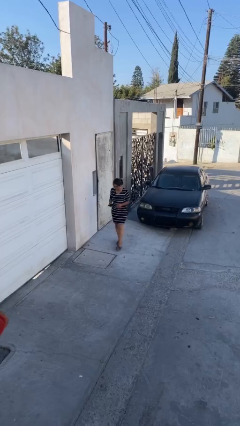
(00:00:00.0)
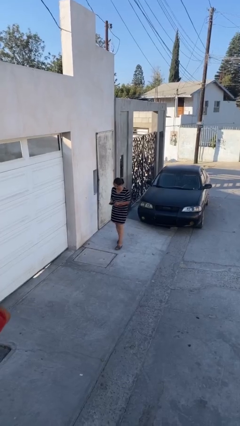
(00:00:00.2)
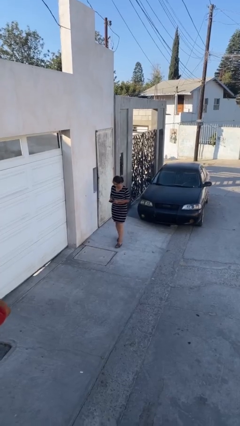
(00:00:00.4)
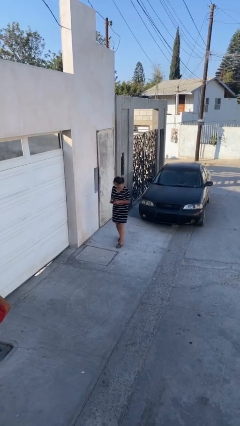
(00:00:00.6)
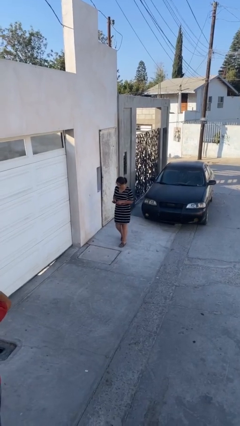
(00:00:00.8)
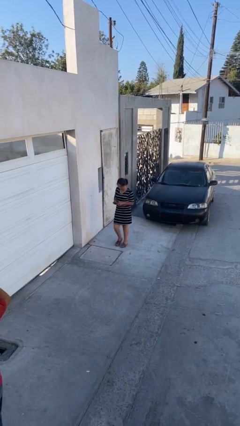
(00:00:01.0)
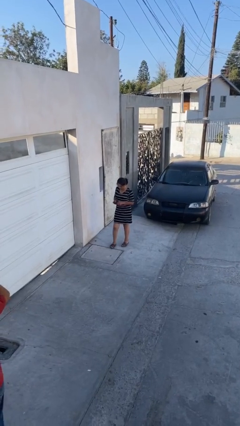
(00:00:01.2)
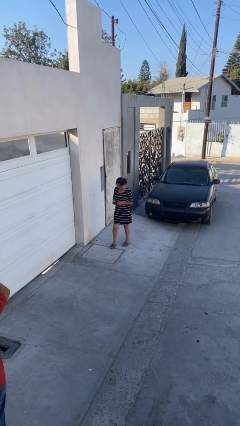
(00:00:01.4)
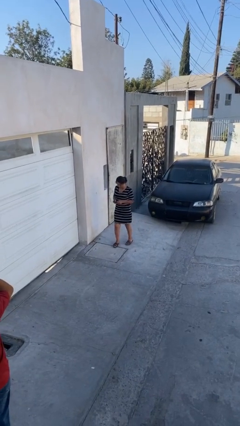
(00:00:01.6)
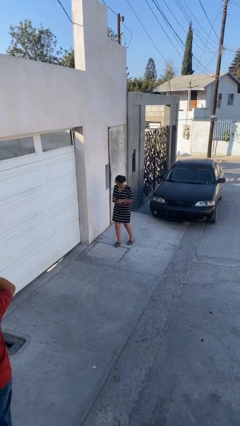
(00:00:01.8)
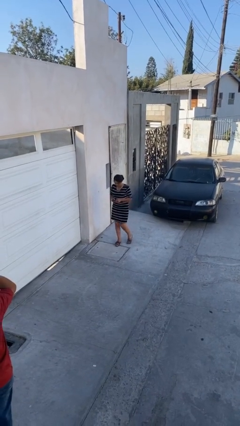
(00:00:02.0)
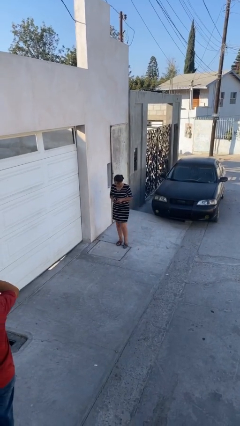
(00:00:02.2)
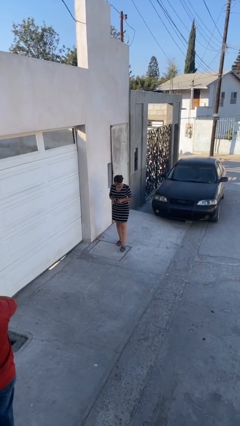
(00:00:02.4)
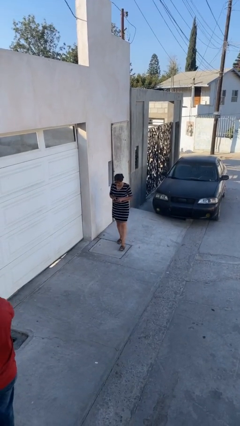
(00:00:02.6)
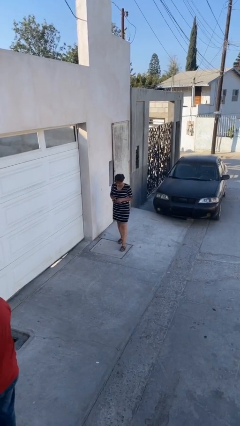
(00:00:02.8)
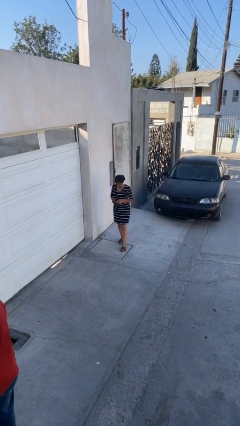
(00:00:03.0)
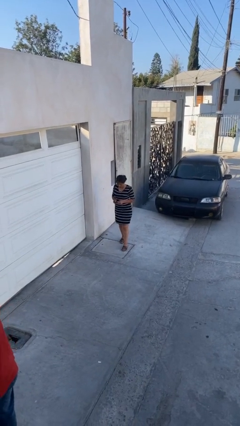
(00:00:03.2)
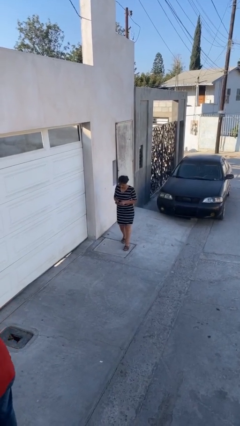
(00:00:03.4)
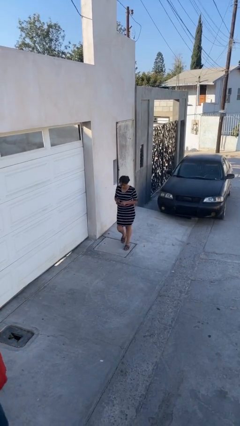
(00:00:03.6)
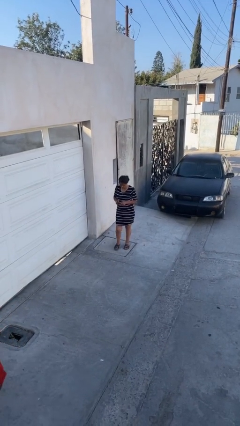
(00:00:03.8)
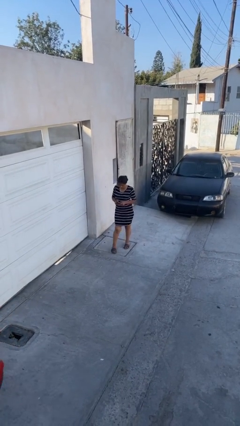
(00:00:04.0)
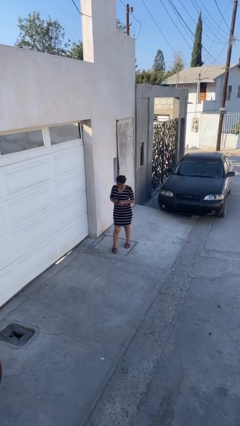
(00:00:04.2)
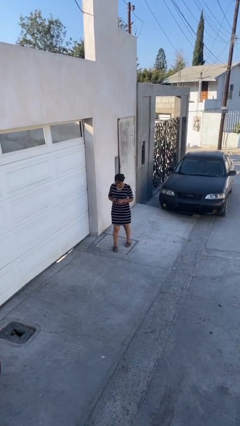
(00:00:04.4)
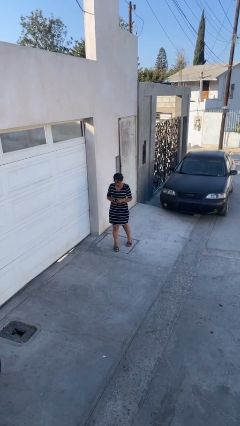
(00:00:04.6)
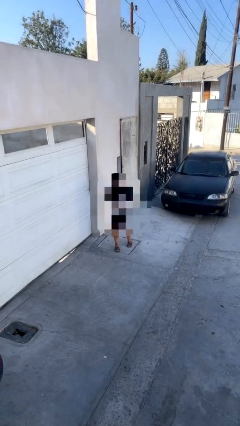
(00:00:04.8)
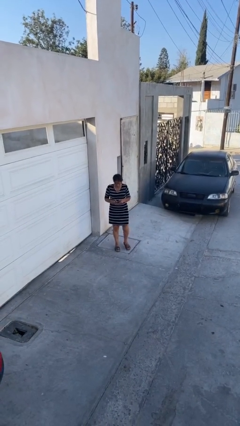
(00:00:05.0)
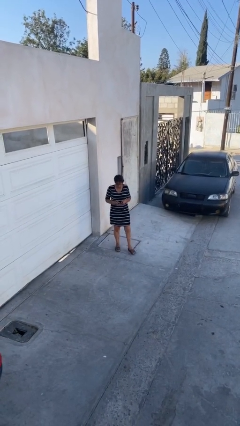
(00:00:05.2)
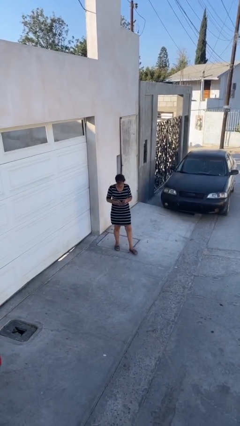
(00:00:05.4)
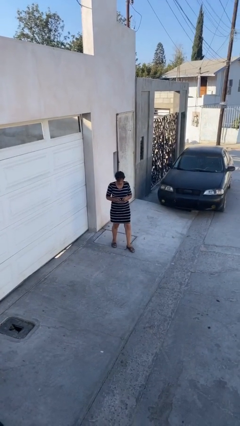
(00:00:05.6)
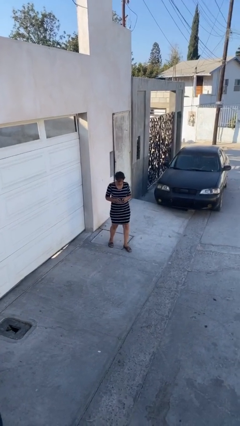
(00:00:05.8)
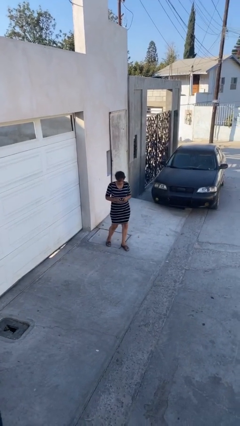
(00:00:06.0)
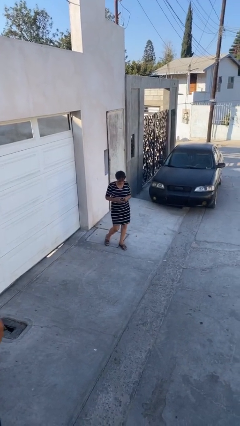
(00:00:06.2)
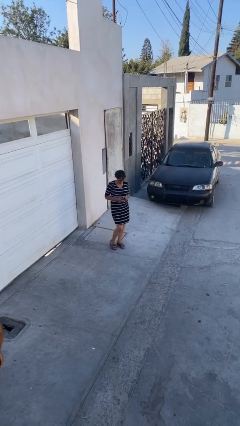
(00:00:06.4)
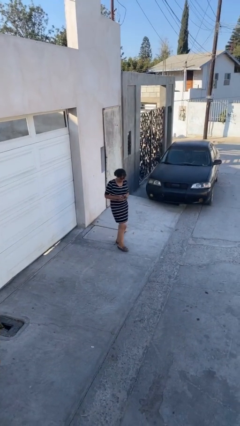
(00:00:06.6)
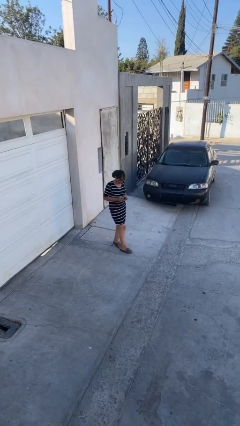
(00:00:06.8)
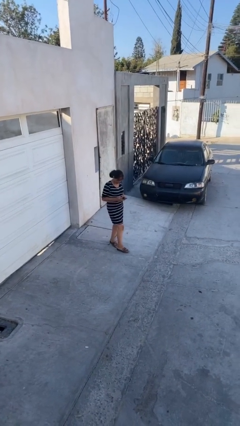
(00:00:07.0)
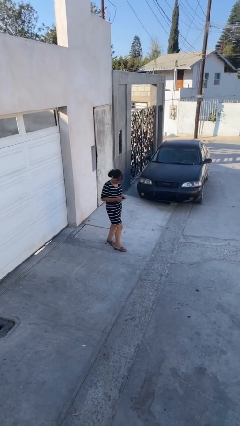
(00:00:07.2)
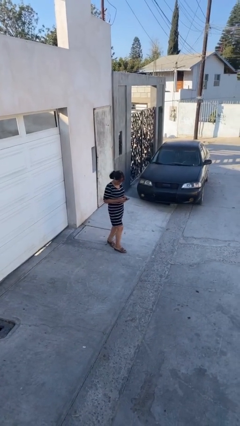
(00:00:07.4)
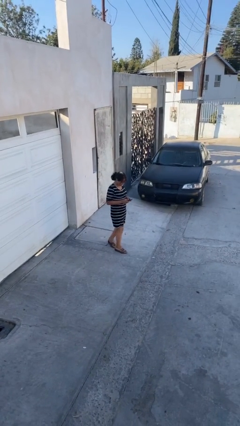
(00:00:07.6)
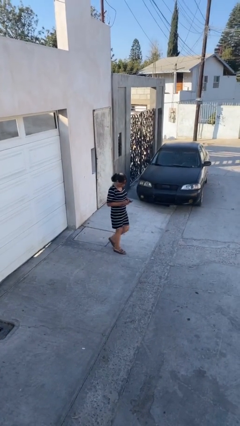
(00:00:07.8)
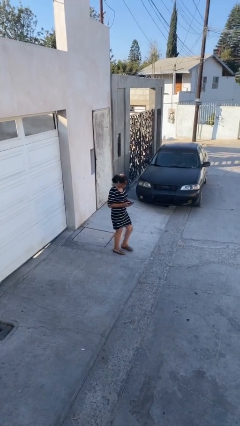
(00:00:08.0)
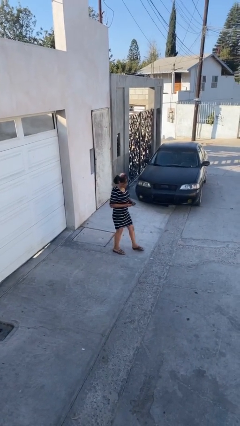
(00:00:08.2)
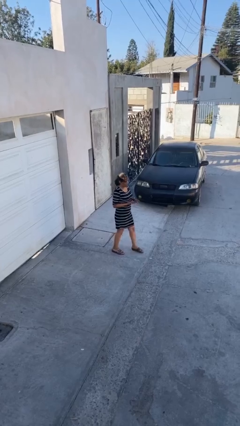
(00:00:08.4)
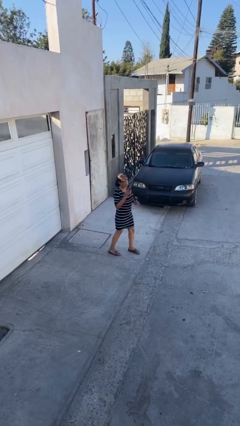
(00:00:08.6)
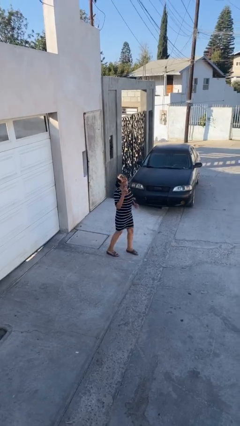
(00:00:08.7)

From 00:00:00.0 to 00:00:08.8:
person texts on phone

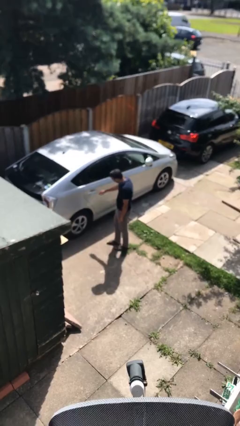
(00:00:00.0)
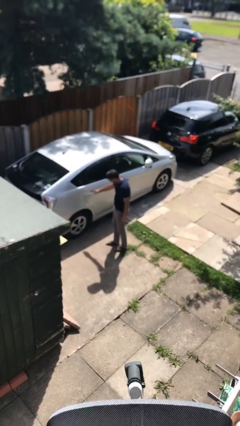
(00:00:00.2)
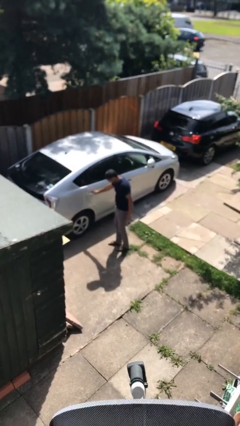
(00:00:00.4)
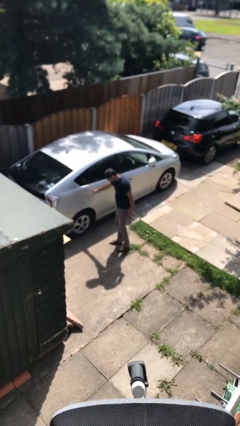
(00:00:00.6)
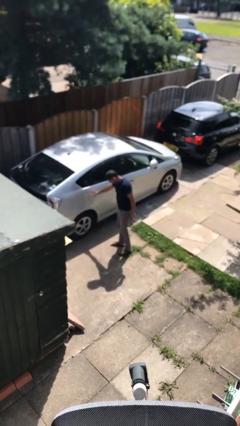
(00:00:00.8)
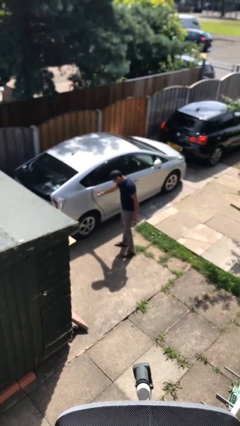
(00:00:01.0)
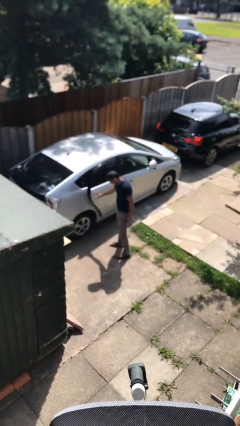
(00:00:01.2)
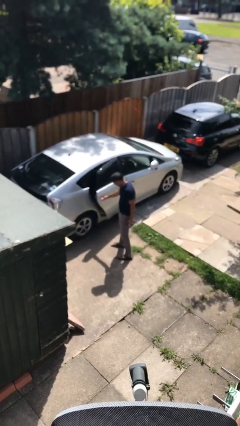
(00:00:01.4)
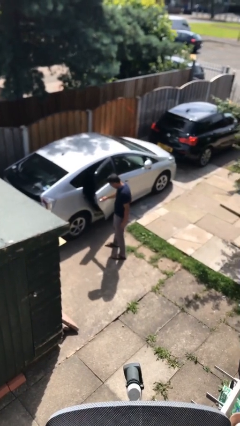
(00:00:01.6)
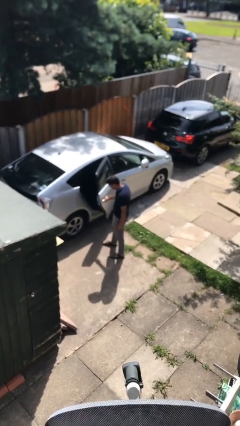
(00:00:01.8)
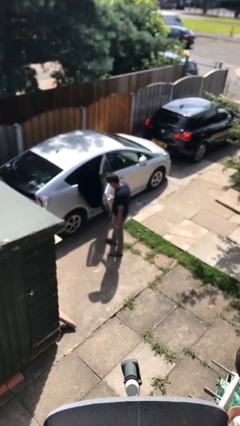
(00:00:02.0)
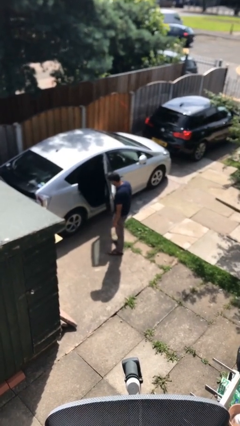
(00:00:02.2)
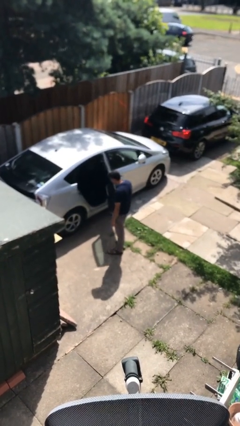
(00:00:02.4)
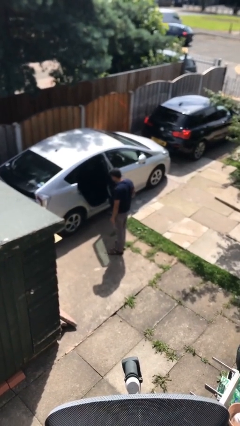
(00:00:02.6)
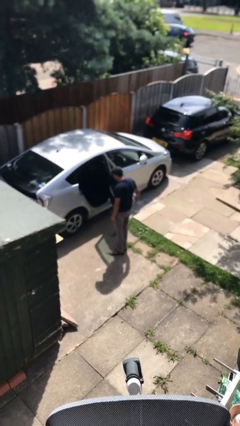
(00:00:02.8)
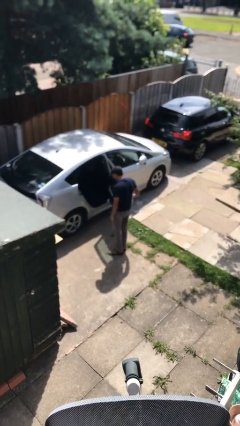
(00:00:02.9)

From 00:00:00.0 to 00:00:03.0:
person opens car door

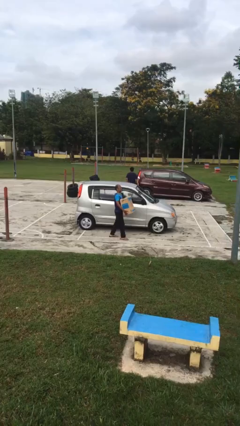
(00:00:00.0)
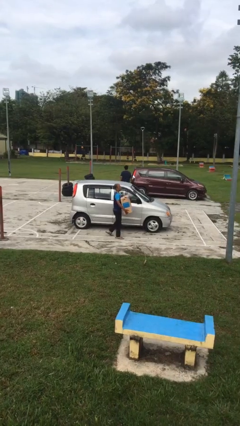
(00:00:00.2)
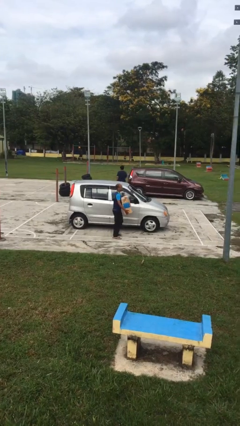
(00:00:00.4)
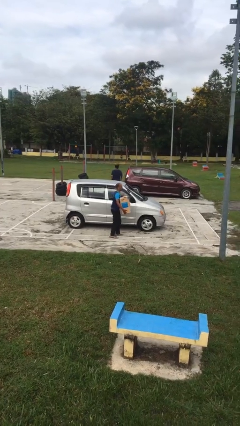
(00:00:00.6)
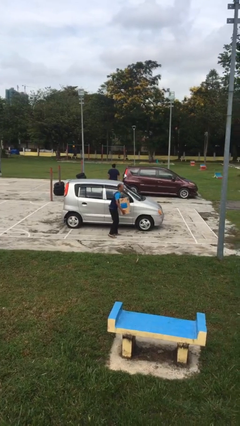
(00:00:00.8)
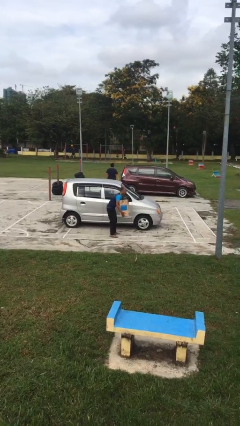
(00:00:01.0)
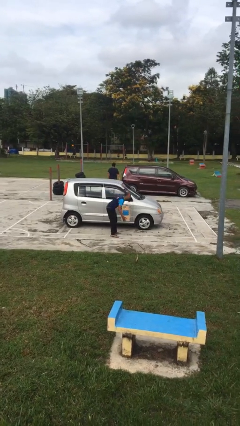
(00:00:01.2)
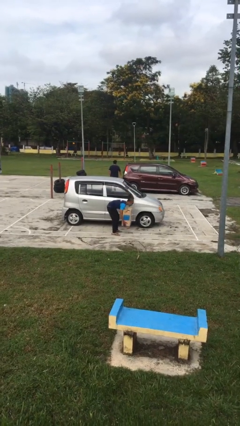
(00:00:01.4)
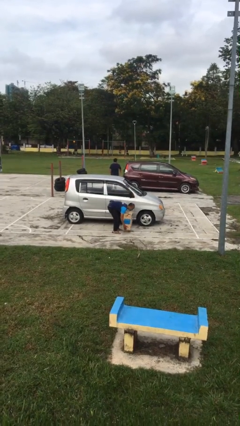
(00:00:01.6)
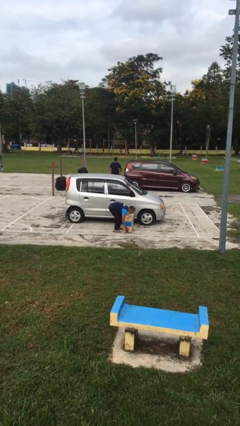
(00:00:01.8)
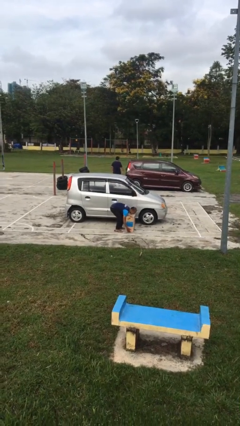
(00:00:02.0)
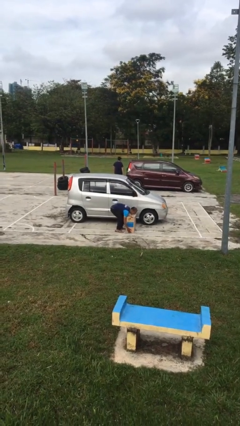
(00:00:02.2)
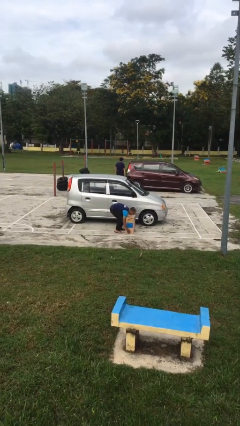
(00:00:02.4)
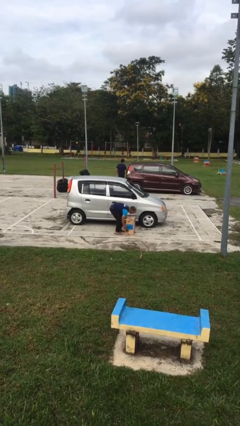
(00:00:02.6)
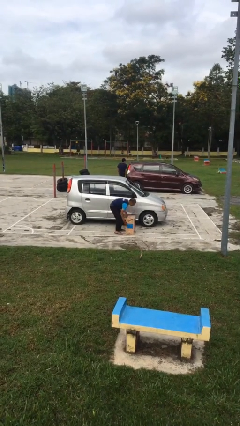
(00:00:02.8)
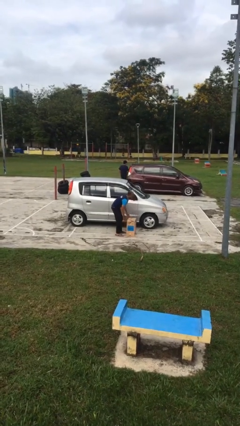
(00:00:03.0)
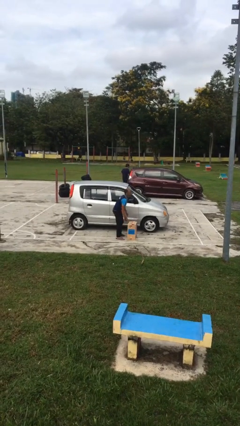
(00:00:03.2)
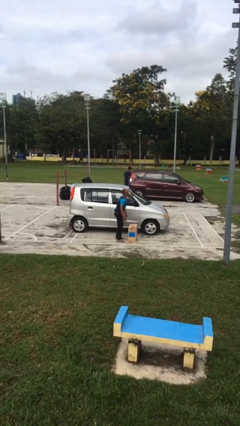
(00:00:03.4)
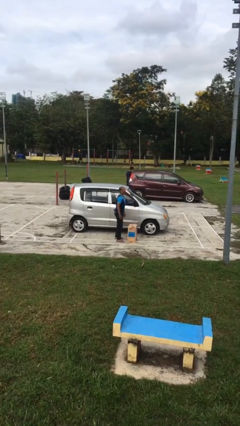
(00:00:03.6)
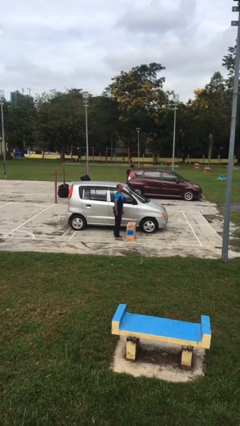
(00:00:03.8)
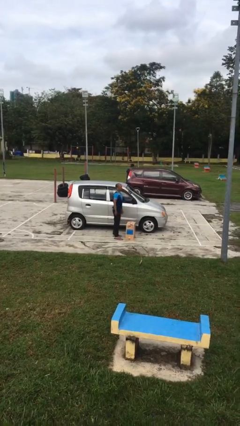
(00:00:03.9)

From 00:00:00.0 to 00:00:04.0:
person puts down object on floor

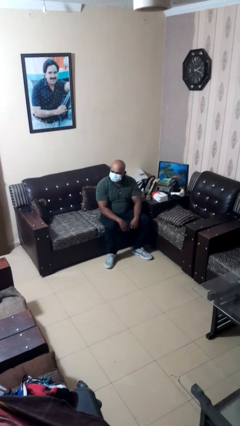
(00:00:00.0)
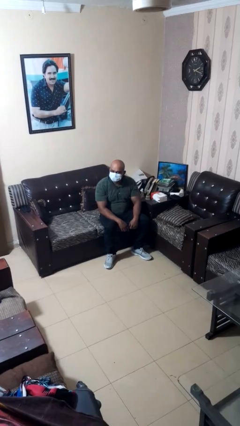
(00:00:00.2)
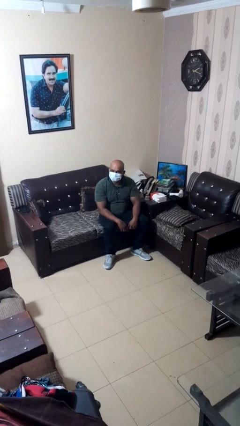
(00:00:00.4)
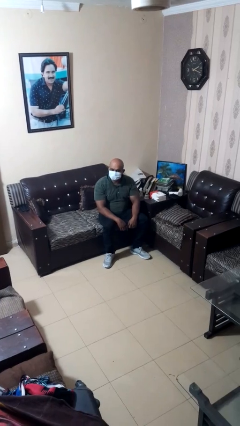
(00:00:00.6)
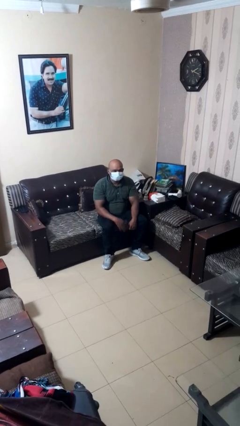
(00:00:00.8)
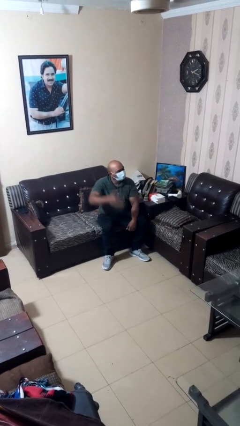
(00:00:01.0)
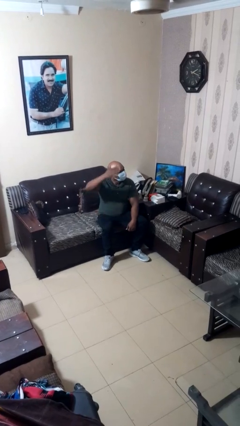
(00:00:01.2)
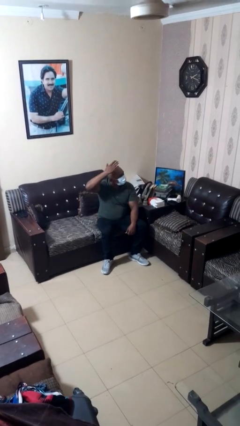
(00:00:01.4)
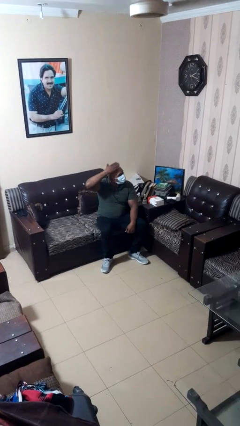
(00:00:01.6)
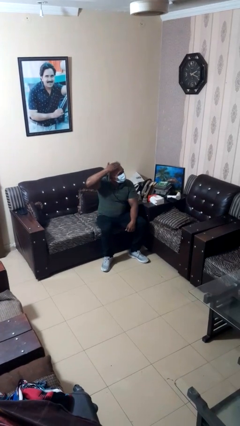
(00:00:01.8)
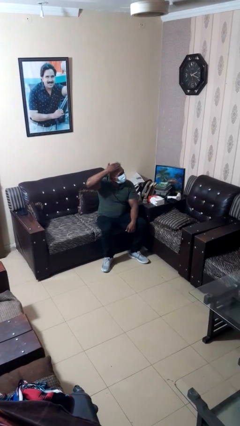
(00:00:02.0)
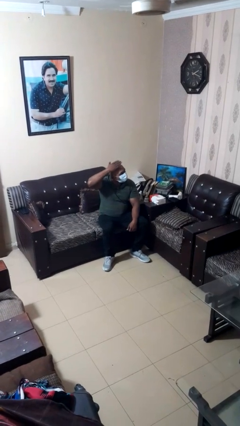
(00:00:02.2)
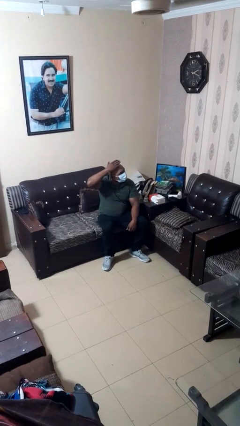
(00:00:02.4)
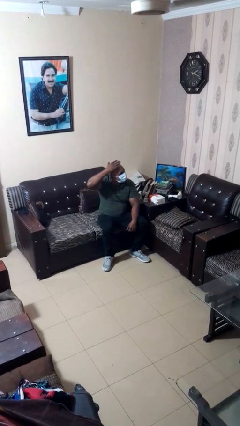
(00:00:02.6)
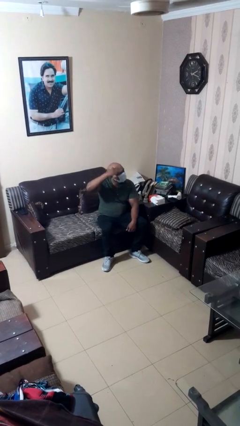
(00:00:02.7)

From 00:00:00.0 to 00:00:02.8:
person pats head
